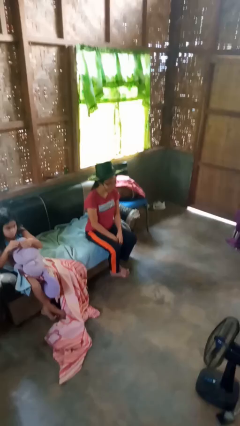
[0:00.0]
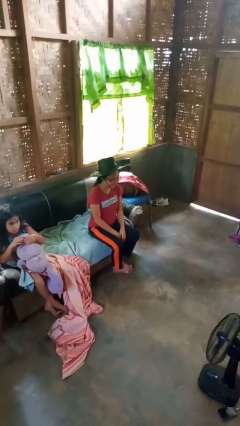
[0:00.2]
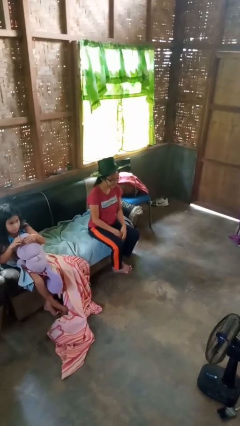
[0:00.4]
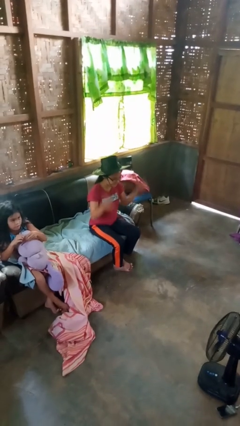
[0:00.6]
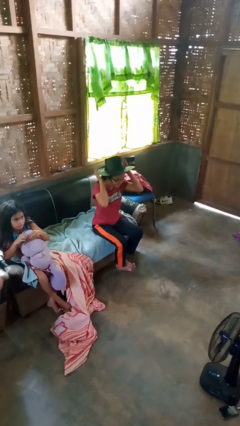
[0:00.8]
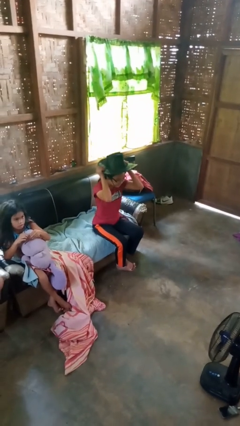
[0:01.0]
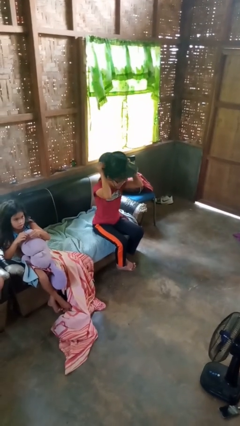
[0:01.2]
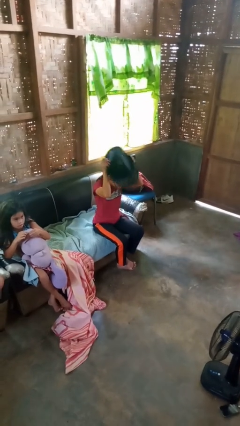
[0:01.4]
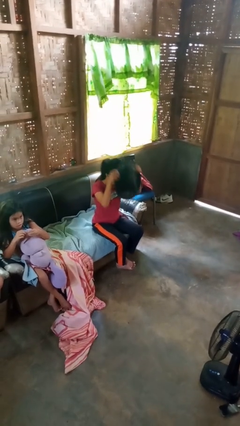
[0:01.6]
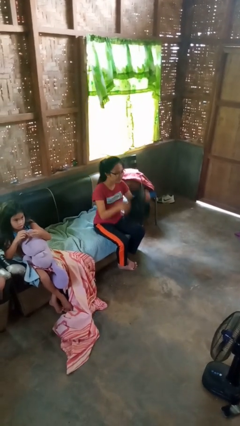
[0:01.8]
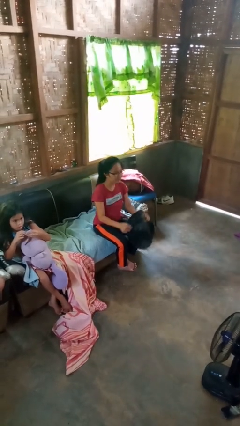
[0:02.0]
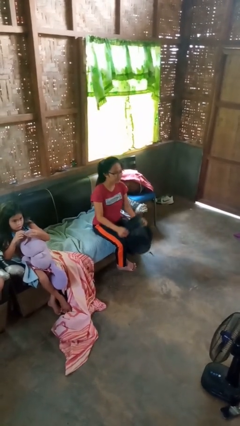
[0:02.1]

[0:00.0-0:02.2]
person takes off hat

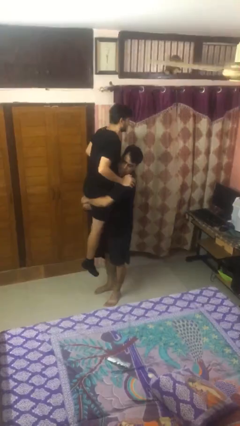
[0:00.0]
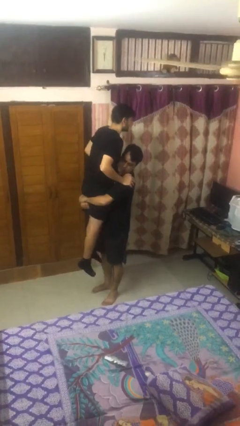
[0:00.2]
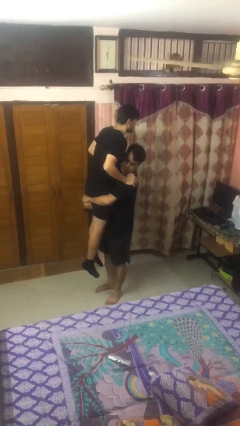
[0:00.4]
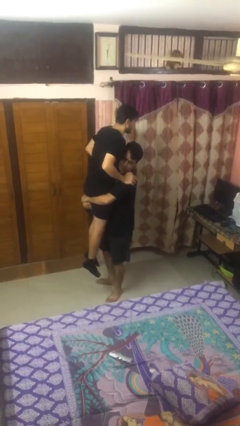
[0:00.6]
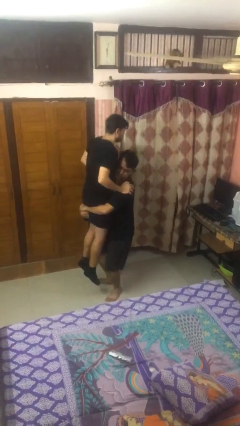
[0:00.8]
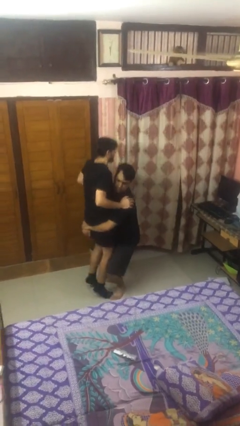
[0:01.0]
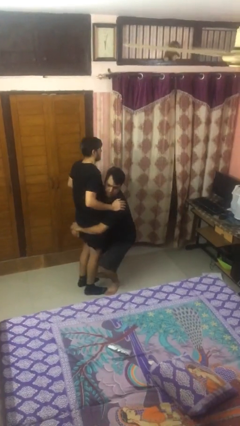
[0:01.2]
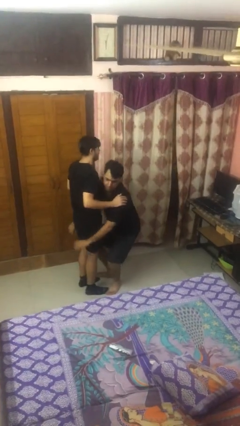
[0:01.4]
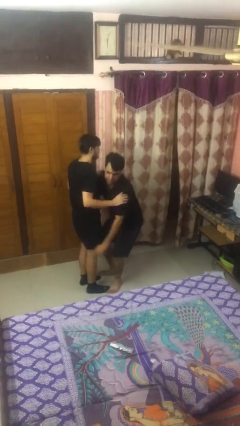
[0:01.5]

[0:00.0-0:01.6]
person puts down person

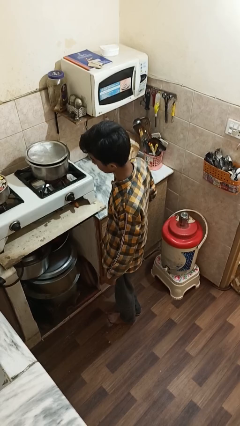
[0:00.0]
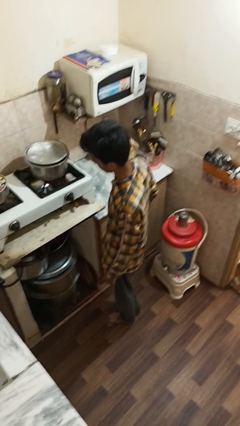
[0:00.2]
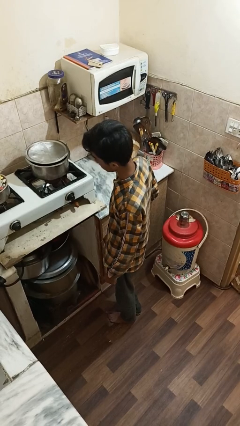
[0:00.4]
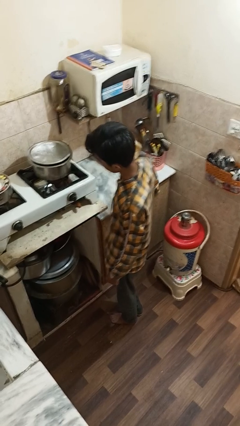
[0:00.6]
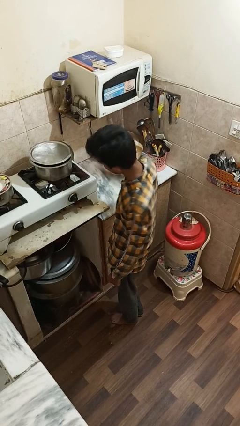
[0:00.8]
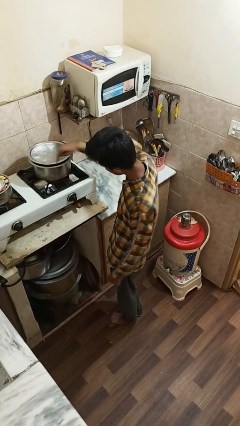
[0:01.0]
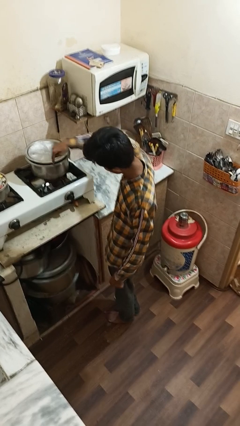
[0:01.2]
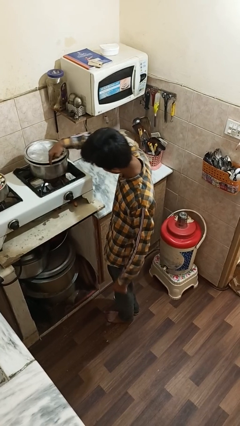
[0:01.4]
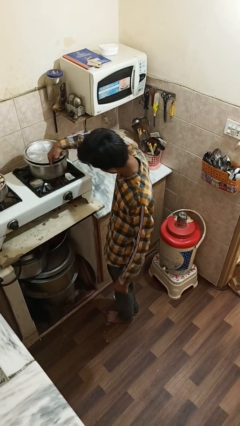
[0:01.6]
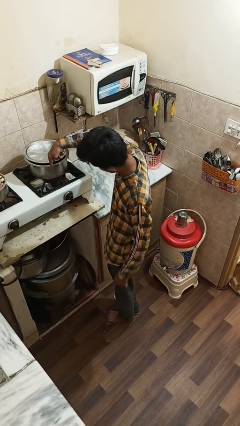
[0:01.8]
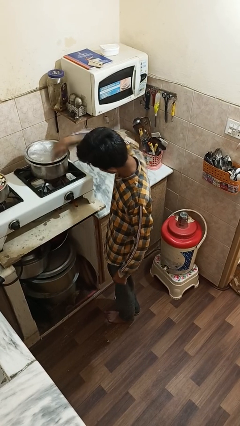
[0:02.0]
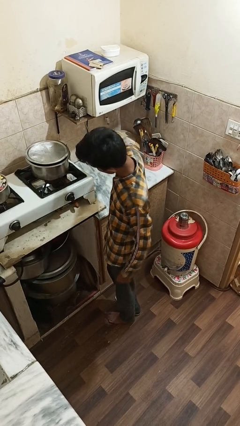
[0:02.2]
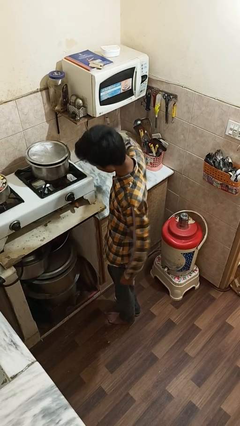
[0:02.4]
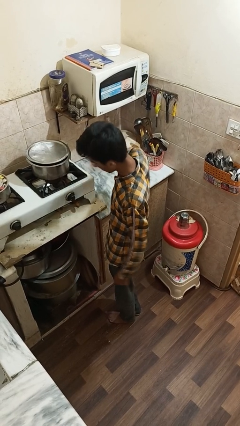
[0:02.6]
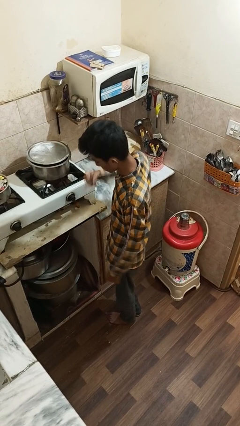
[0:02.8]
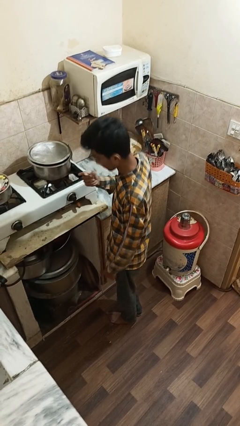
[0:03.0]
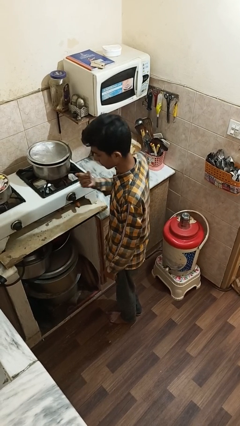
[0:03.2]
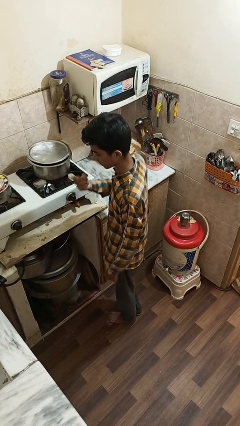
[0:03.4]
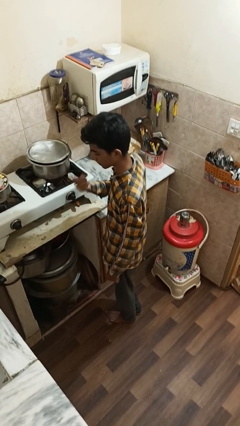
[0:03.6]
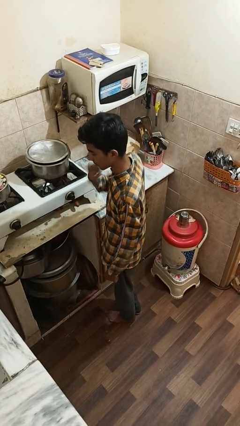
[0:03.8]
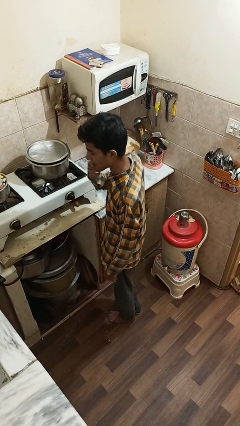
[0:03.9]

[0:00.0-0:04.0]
person burns hand

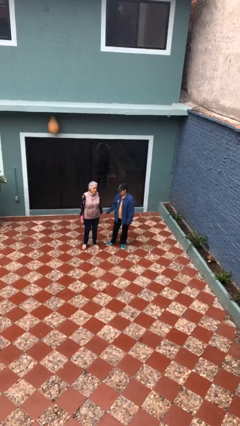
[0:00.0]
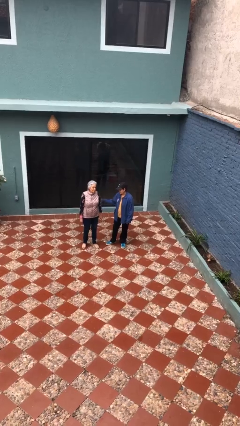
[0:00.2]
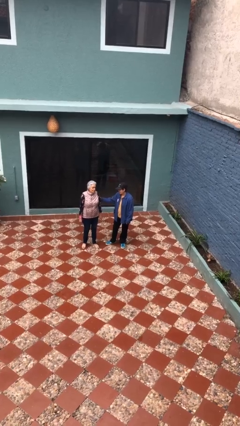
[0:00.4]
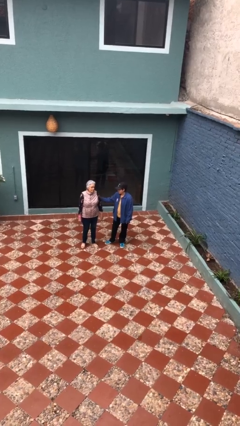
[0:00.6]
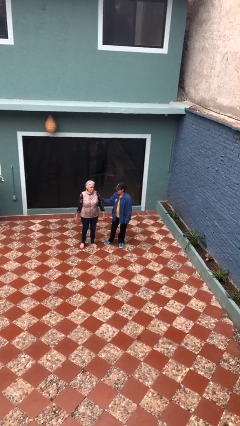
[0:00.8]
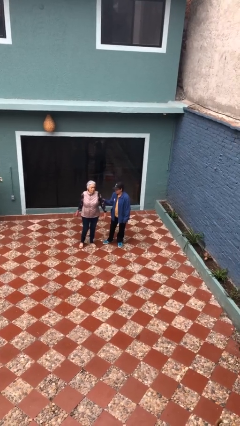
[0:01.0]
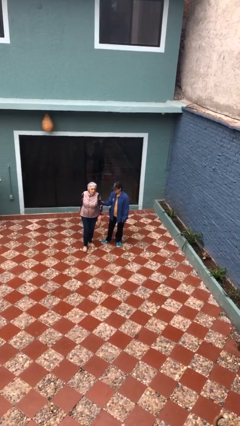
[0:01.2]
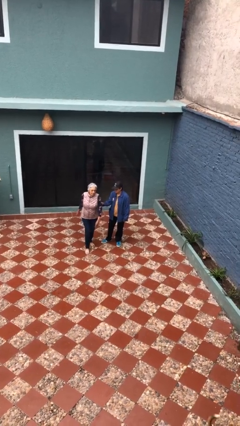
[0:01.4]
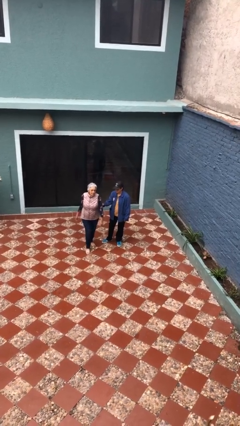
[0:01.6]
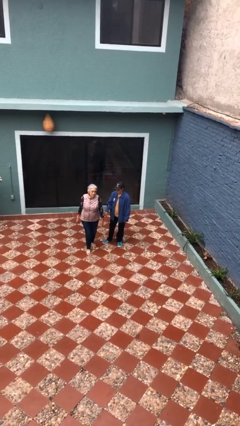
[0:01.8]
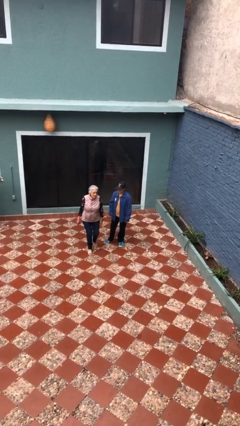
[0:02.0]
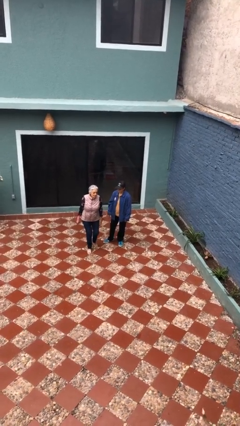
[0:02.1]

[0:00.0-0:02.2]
person grabs person by forearm

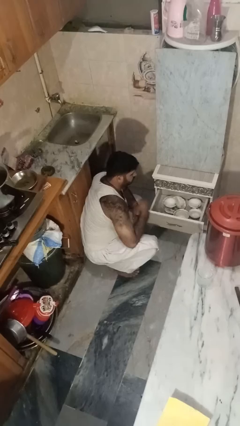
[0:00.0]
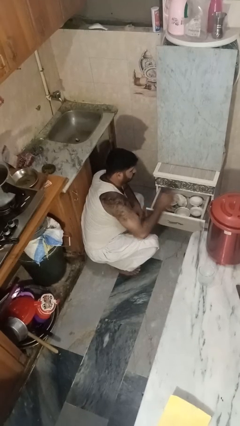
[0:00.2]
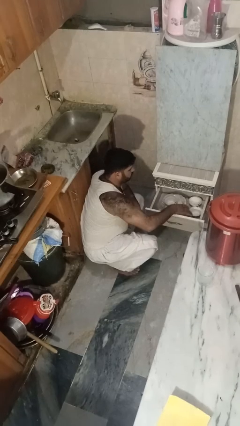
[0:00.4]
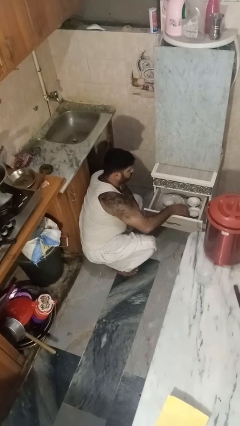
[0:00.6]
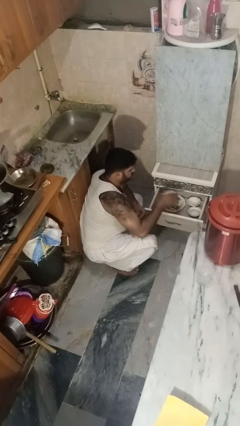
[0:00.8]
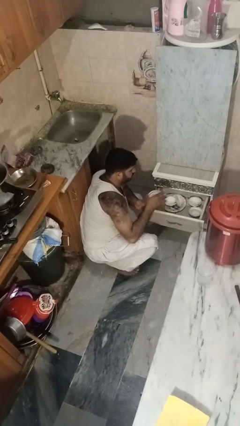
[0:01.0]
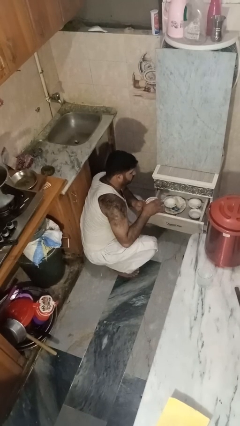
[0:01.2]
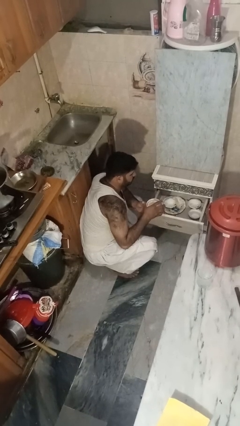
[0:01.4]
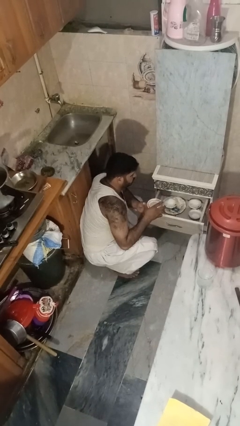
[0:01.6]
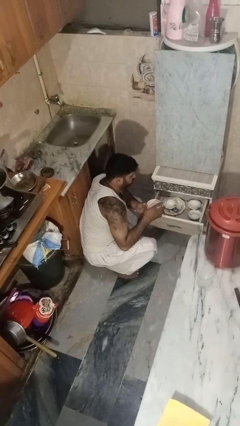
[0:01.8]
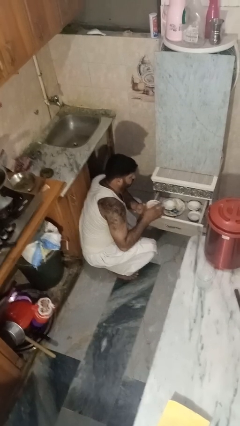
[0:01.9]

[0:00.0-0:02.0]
person takes object from kitchen drawer

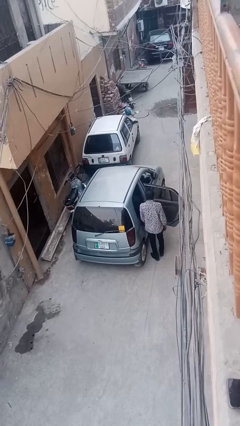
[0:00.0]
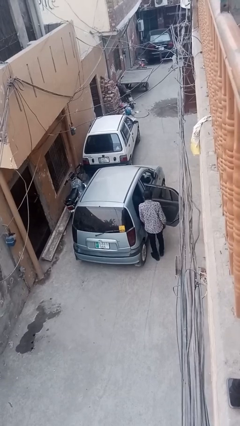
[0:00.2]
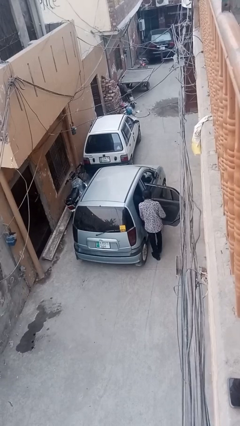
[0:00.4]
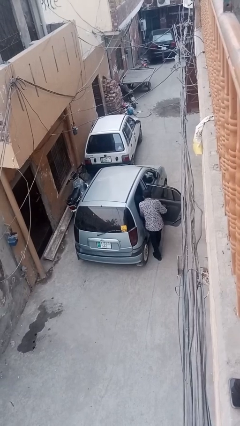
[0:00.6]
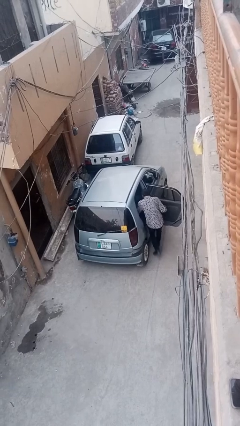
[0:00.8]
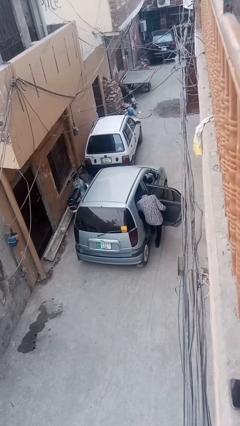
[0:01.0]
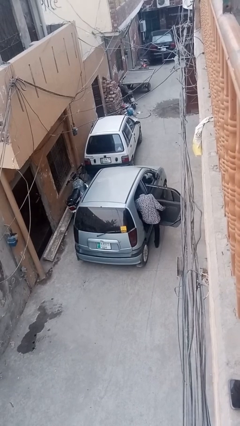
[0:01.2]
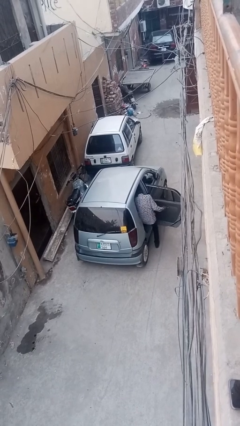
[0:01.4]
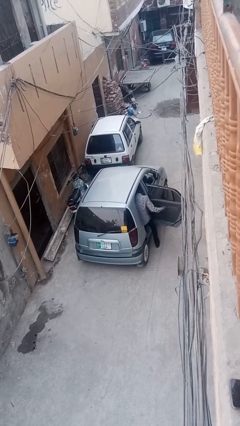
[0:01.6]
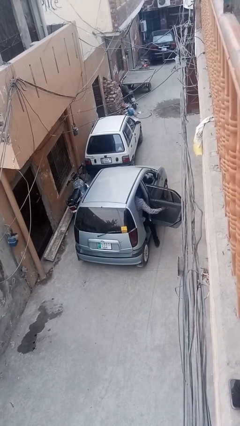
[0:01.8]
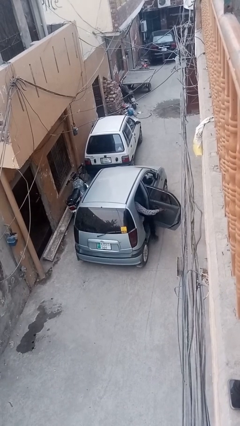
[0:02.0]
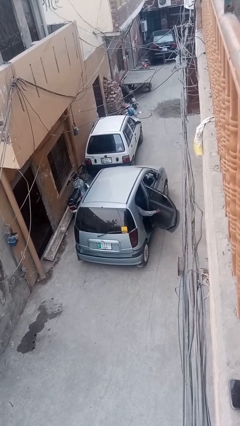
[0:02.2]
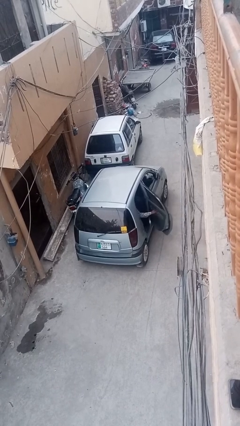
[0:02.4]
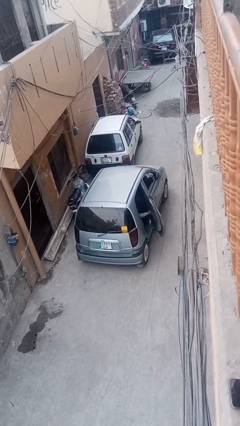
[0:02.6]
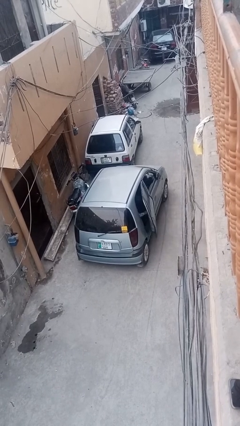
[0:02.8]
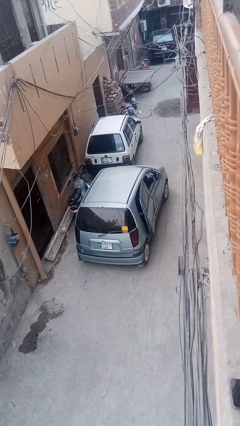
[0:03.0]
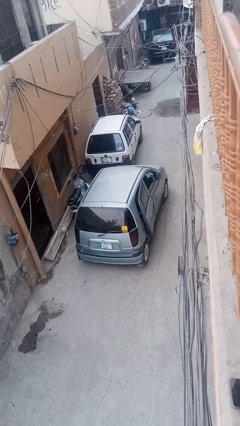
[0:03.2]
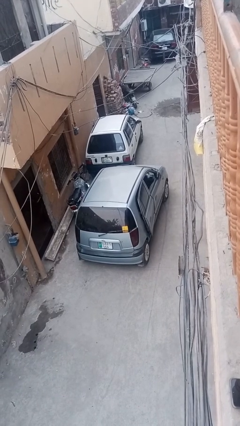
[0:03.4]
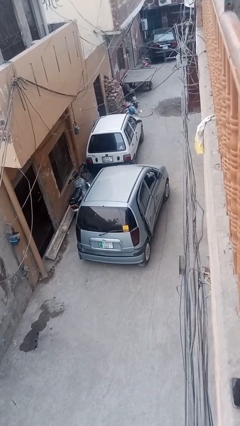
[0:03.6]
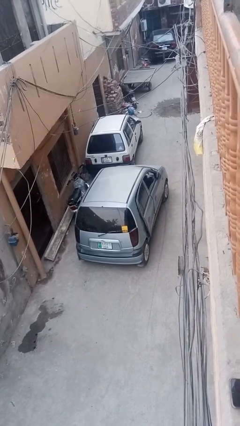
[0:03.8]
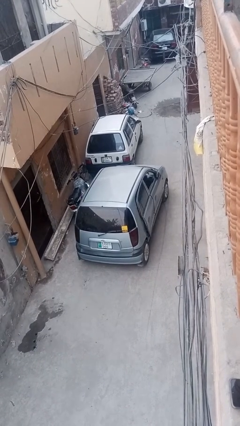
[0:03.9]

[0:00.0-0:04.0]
car picks up person

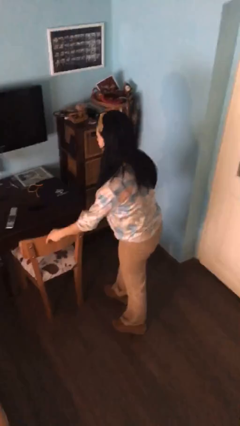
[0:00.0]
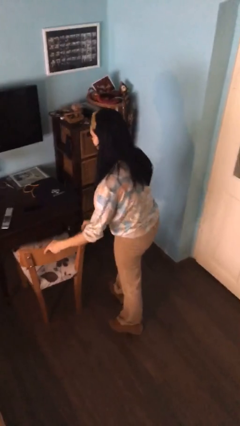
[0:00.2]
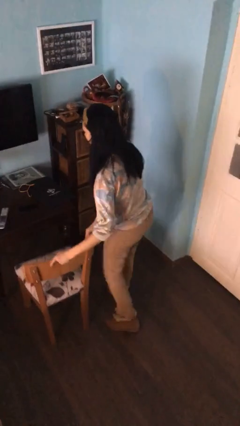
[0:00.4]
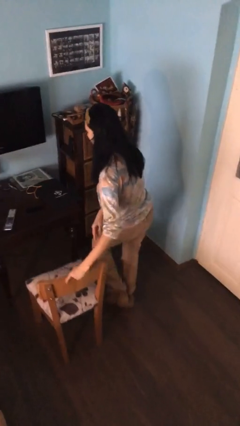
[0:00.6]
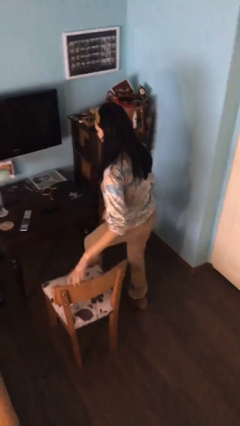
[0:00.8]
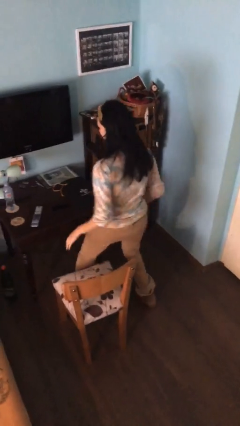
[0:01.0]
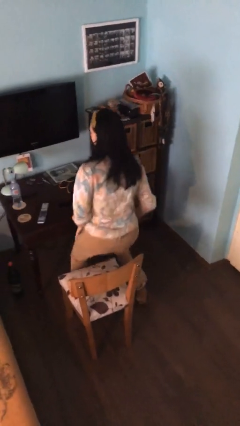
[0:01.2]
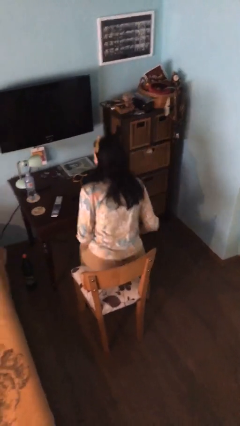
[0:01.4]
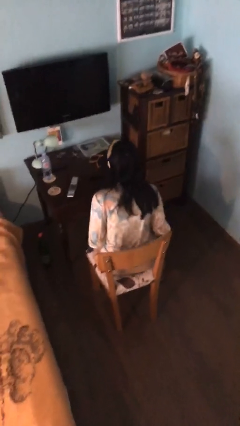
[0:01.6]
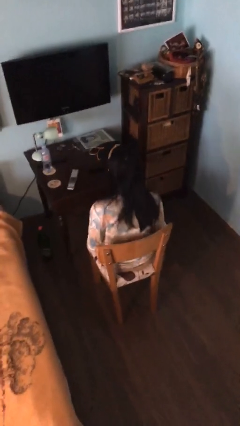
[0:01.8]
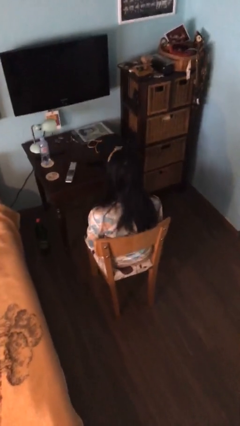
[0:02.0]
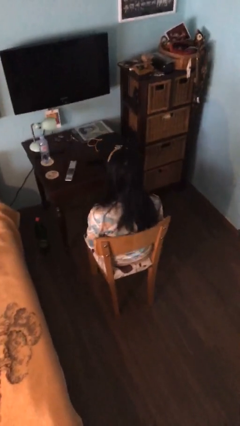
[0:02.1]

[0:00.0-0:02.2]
person sits down
